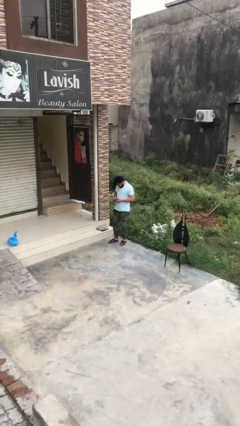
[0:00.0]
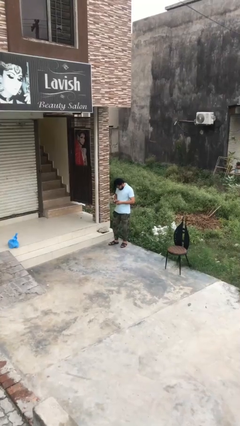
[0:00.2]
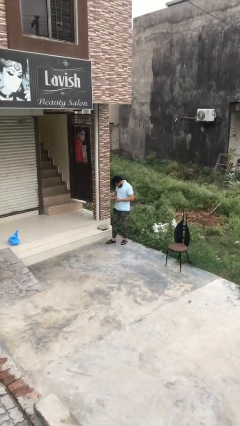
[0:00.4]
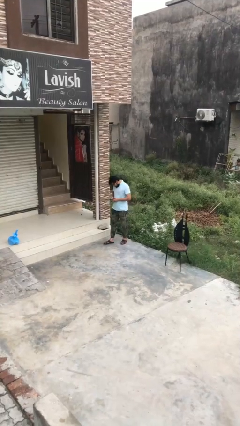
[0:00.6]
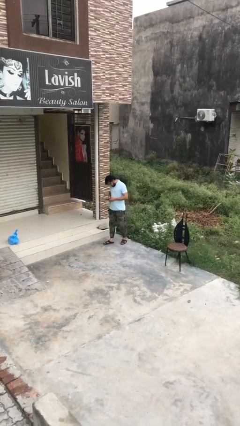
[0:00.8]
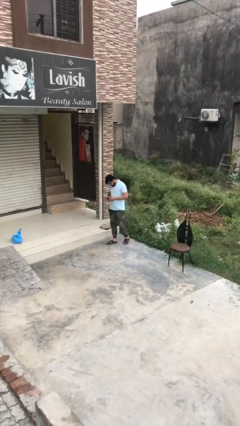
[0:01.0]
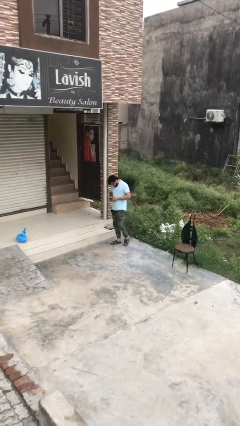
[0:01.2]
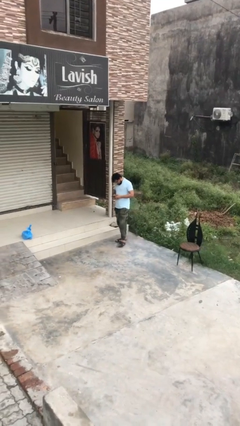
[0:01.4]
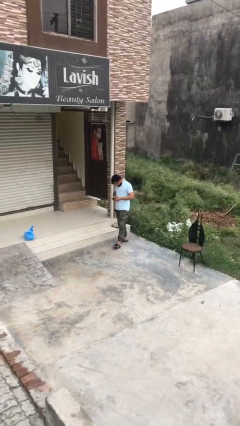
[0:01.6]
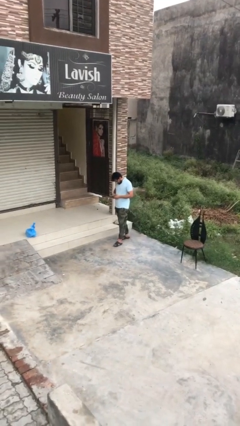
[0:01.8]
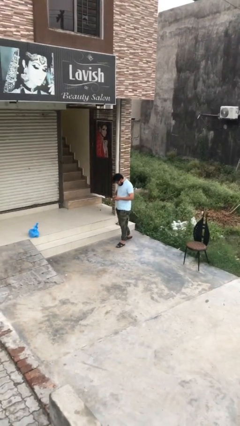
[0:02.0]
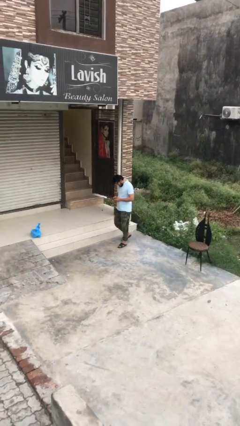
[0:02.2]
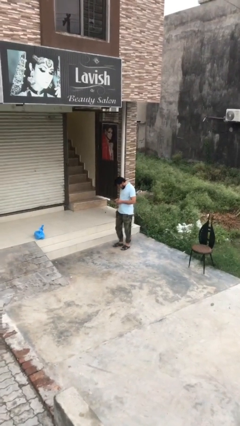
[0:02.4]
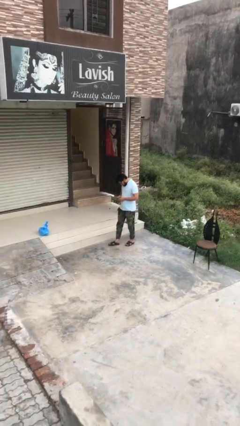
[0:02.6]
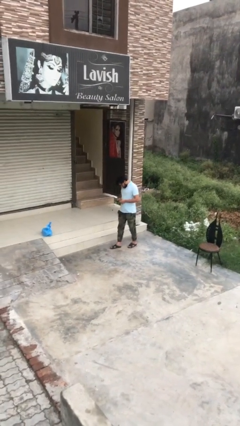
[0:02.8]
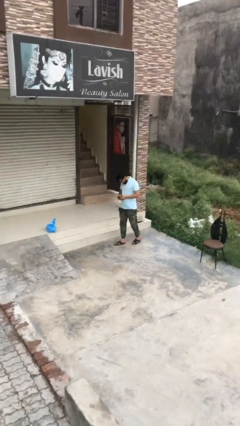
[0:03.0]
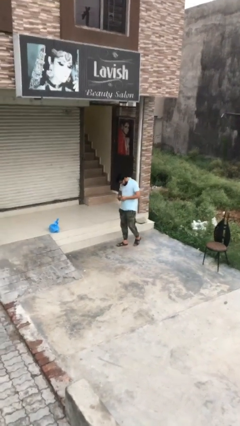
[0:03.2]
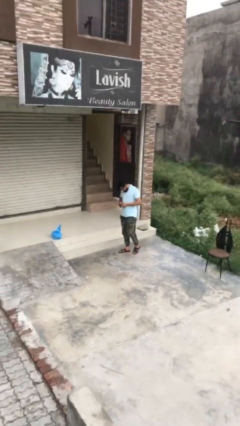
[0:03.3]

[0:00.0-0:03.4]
person texts on phone

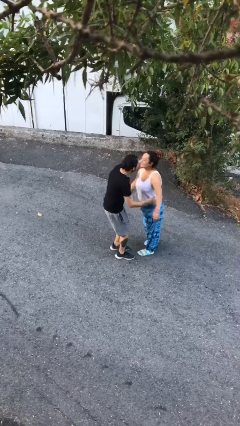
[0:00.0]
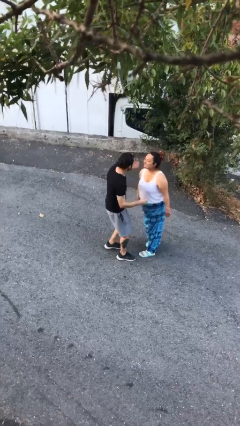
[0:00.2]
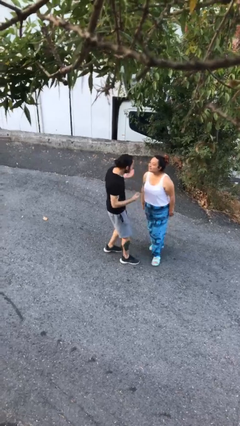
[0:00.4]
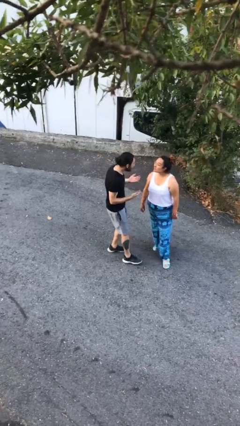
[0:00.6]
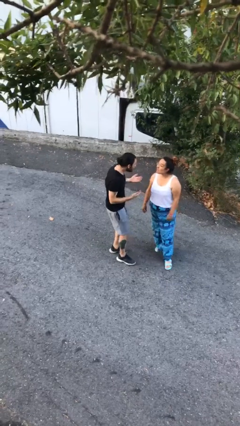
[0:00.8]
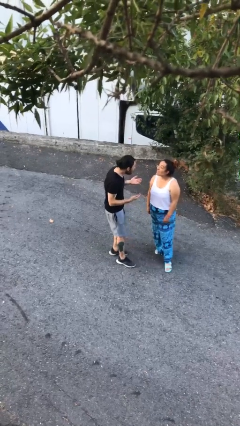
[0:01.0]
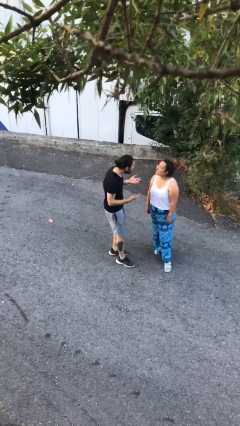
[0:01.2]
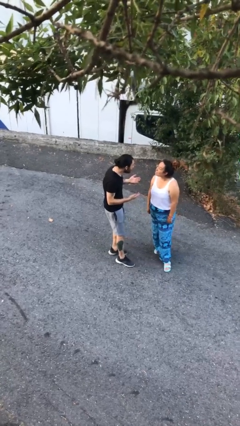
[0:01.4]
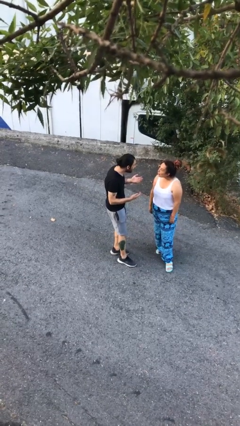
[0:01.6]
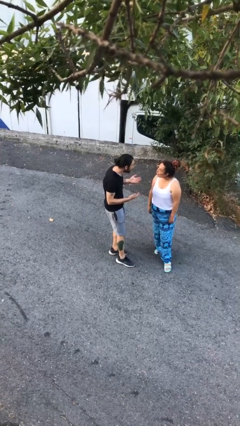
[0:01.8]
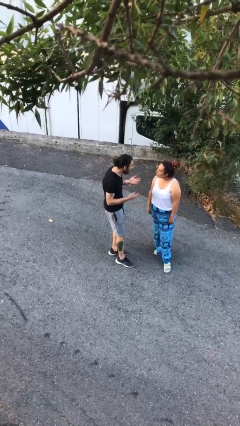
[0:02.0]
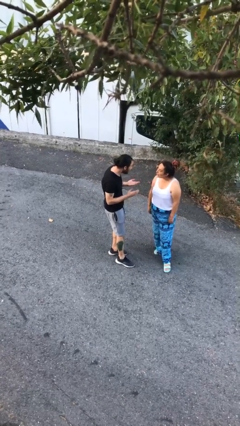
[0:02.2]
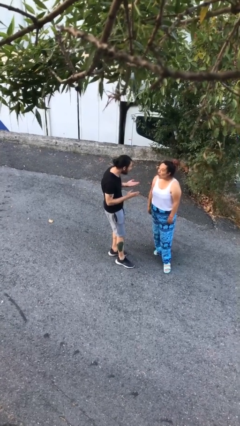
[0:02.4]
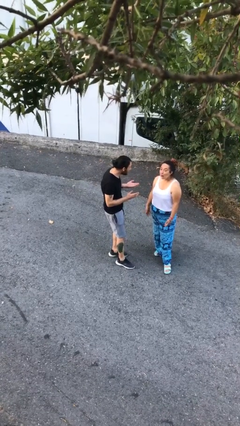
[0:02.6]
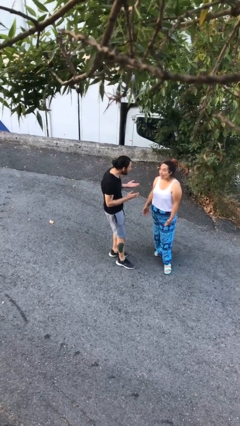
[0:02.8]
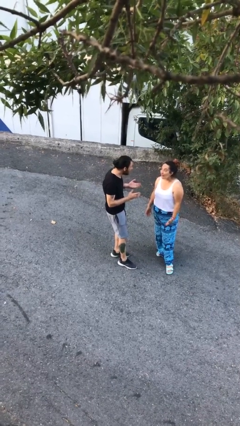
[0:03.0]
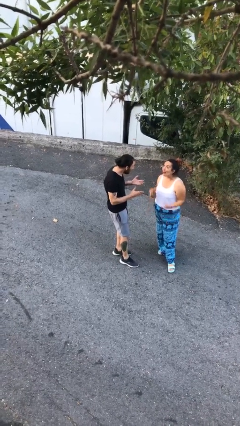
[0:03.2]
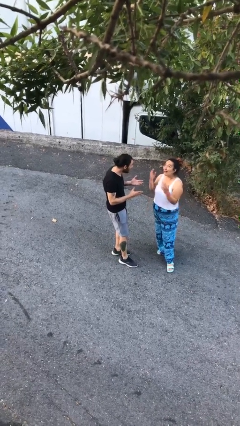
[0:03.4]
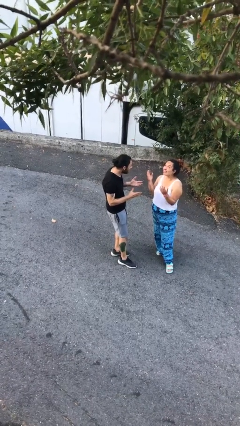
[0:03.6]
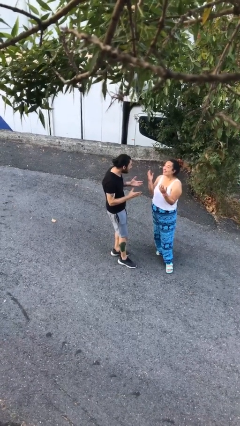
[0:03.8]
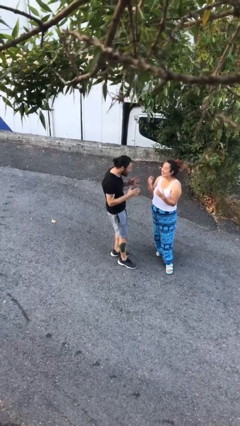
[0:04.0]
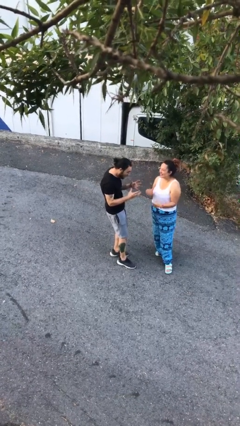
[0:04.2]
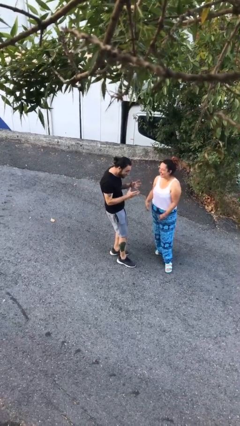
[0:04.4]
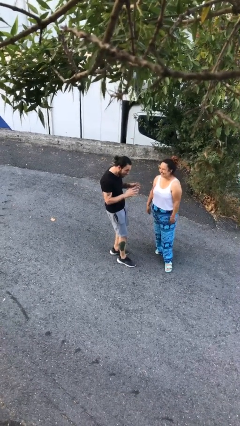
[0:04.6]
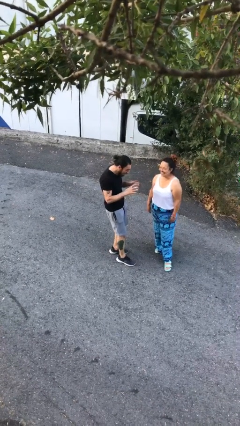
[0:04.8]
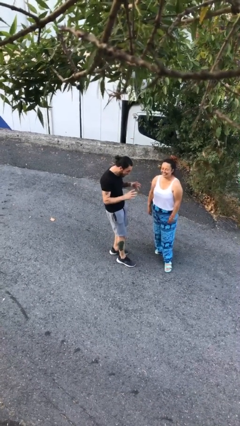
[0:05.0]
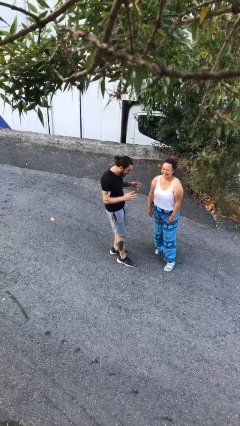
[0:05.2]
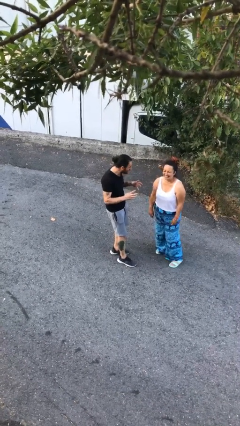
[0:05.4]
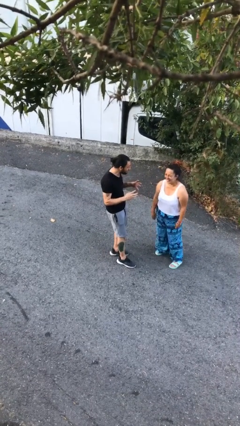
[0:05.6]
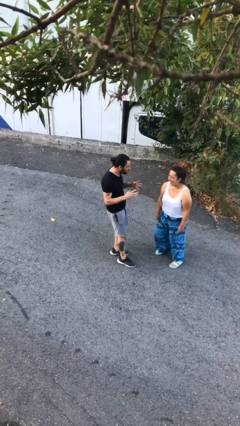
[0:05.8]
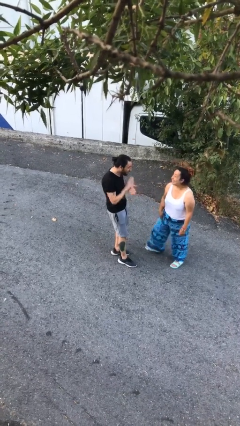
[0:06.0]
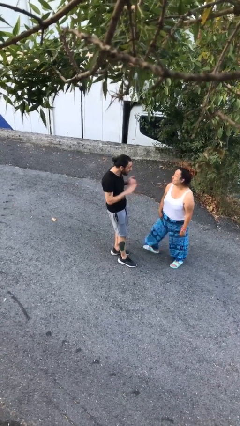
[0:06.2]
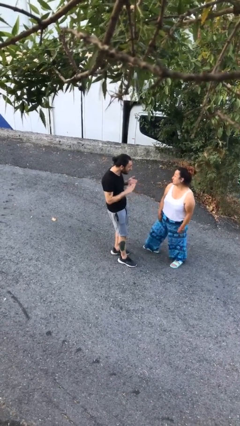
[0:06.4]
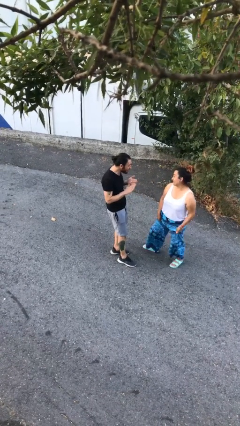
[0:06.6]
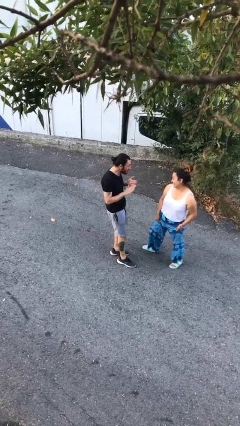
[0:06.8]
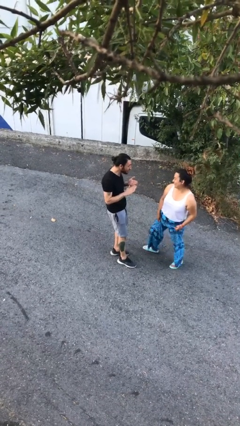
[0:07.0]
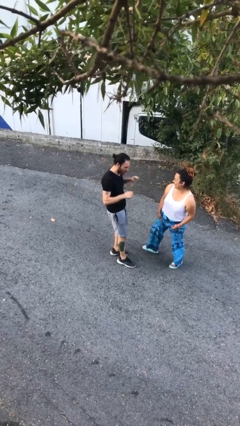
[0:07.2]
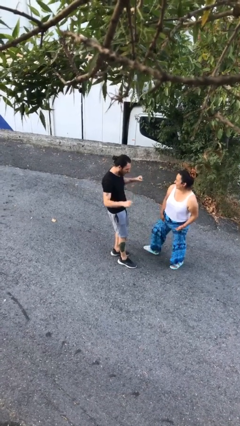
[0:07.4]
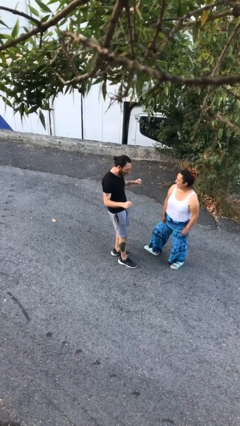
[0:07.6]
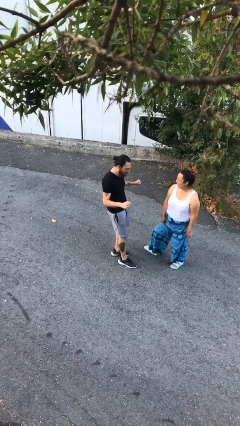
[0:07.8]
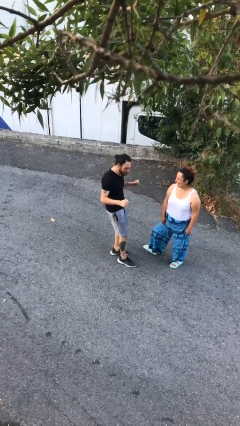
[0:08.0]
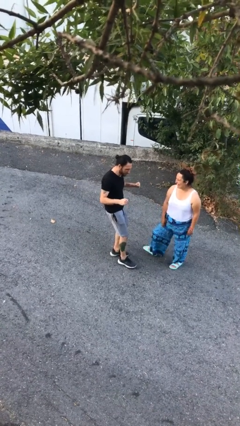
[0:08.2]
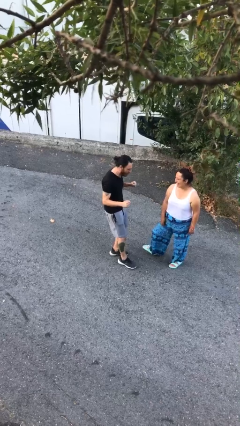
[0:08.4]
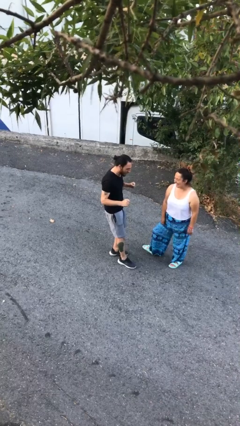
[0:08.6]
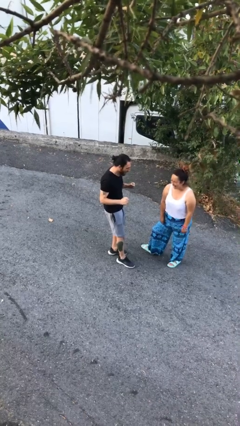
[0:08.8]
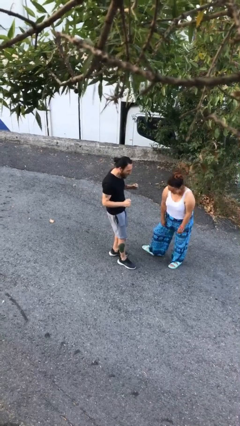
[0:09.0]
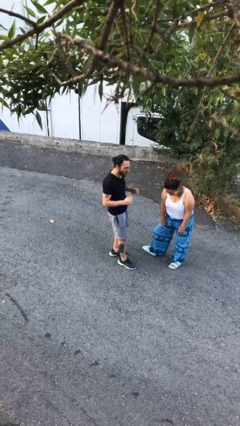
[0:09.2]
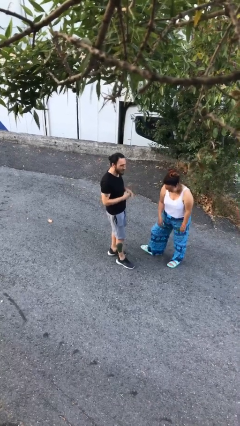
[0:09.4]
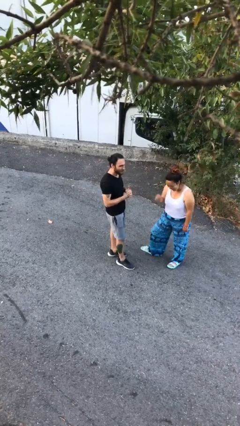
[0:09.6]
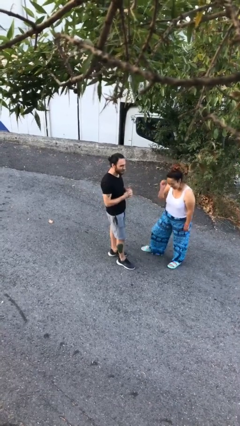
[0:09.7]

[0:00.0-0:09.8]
person talks to person

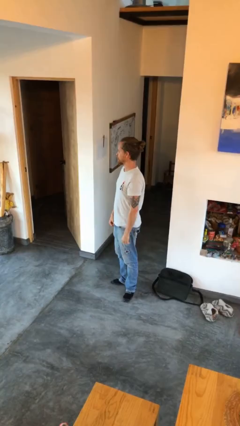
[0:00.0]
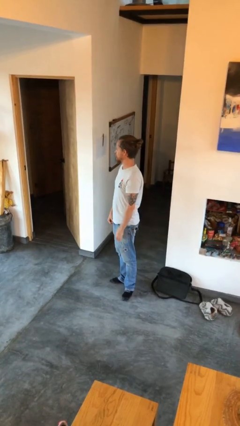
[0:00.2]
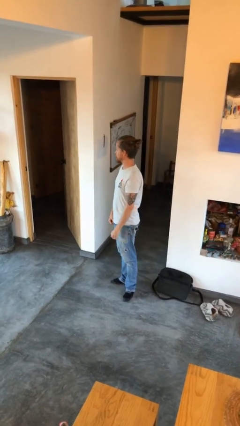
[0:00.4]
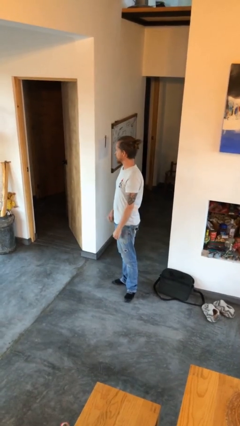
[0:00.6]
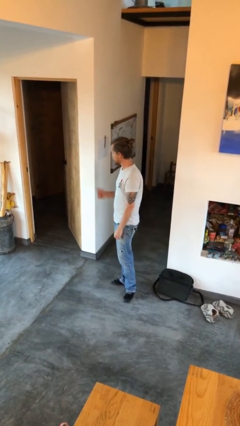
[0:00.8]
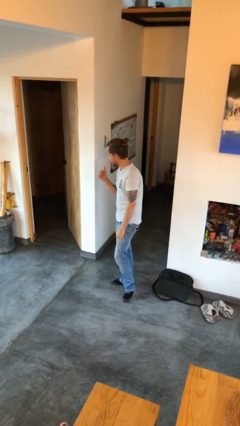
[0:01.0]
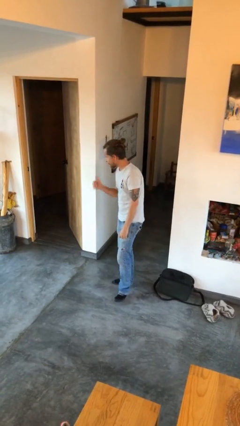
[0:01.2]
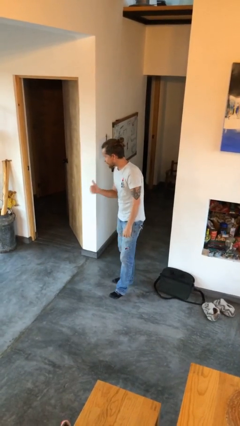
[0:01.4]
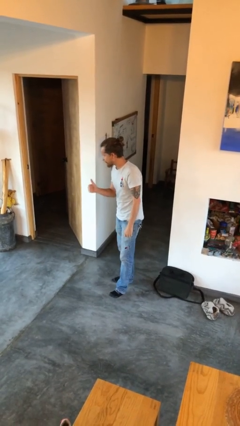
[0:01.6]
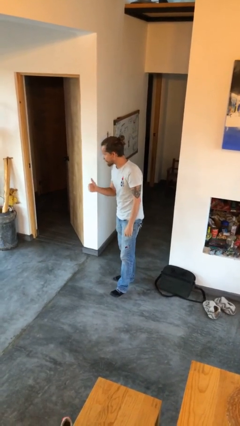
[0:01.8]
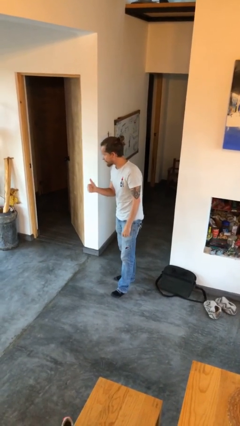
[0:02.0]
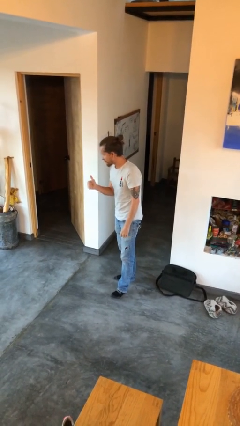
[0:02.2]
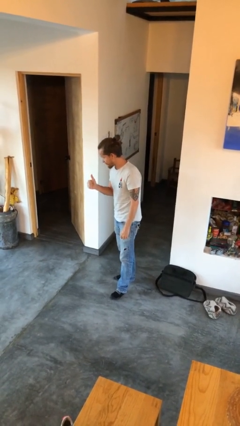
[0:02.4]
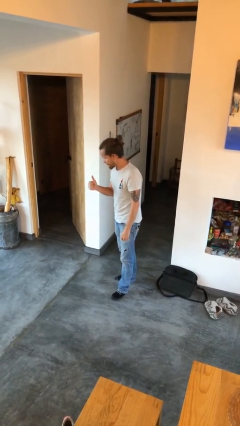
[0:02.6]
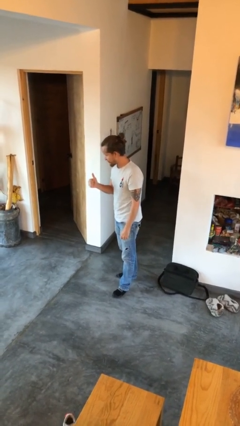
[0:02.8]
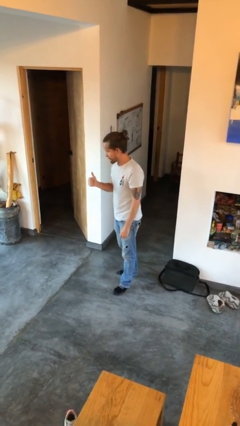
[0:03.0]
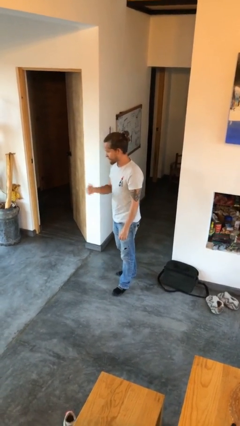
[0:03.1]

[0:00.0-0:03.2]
person gestures thumbs up

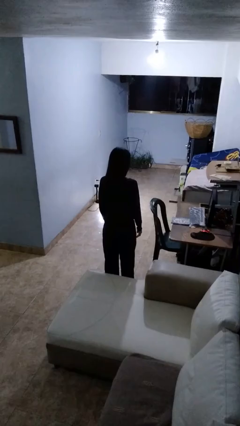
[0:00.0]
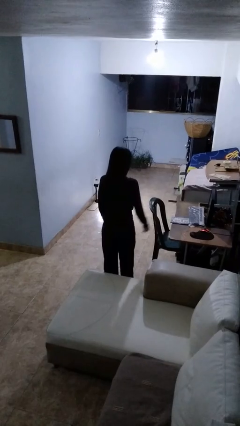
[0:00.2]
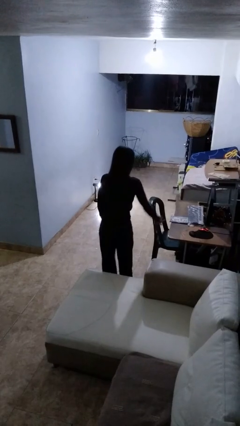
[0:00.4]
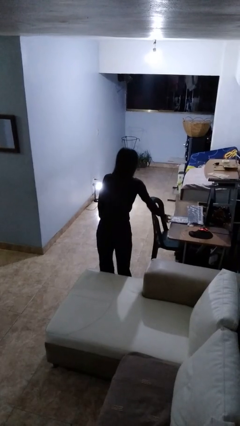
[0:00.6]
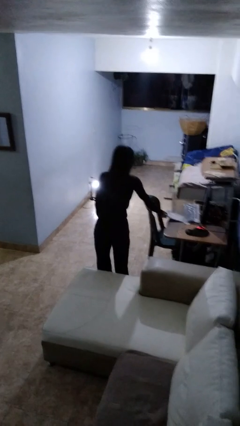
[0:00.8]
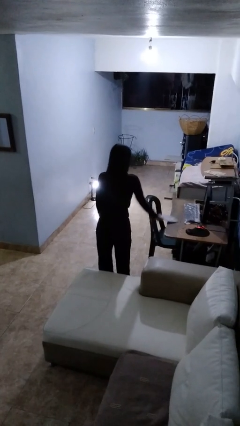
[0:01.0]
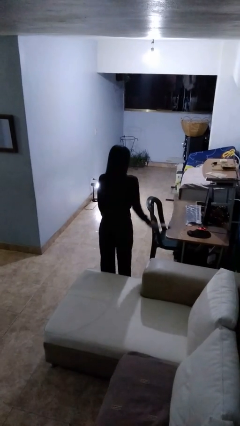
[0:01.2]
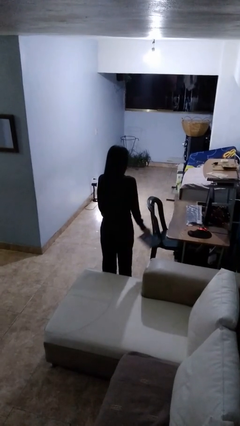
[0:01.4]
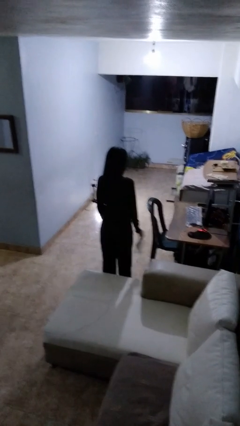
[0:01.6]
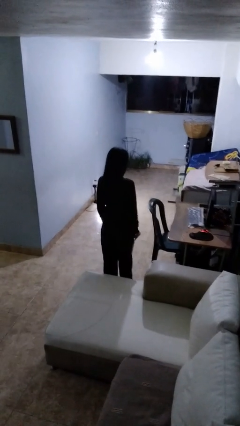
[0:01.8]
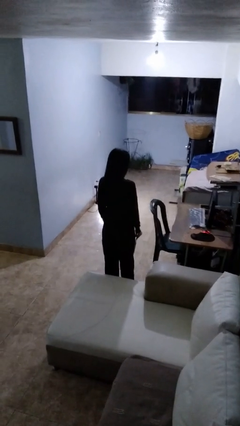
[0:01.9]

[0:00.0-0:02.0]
person picks up object from table
